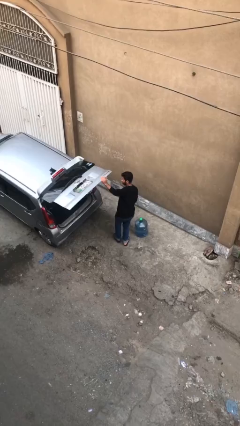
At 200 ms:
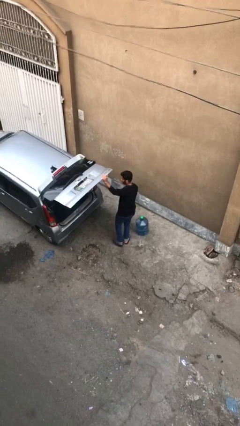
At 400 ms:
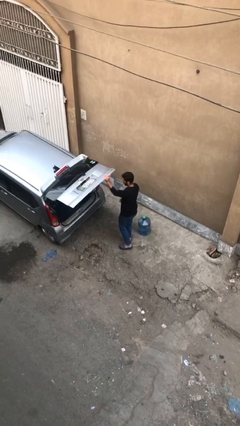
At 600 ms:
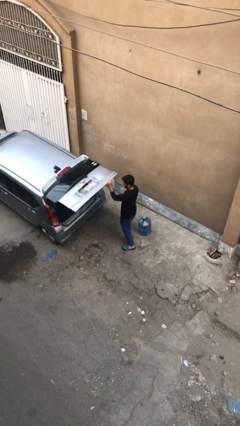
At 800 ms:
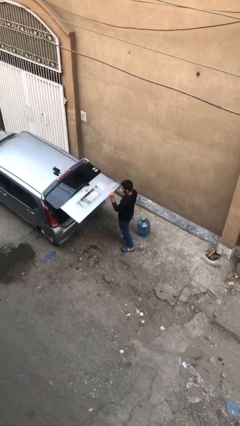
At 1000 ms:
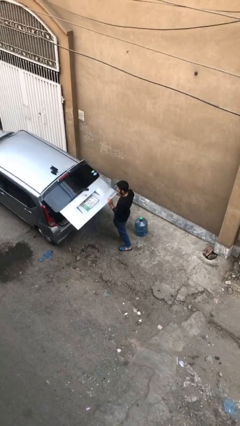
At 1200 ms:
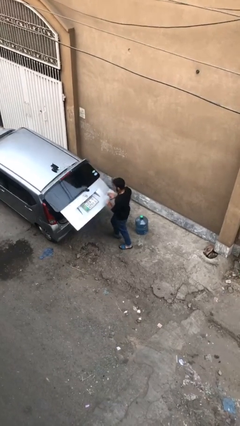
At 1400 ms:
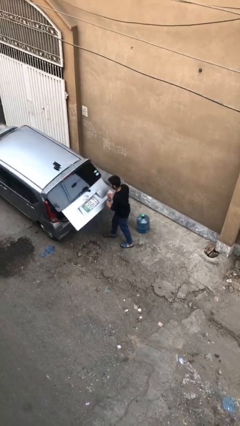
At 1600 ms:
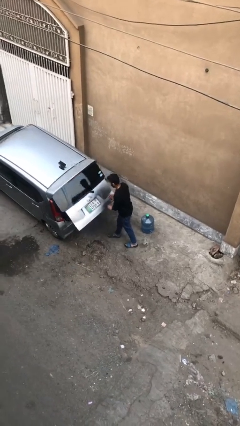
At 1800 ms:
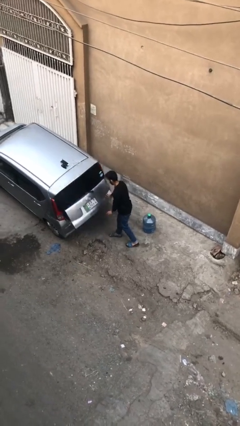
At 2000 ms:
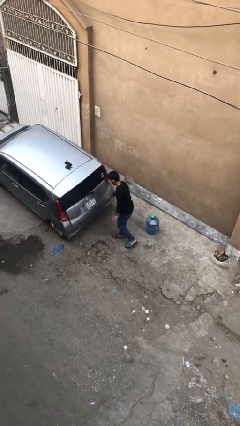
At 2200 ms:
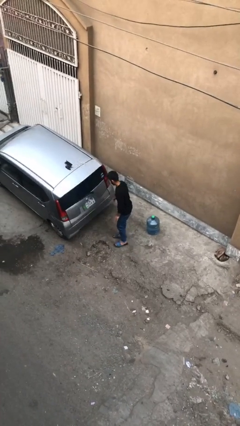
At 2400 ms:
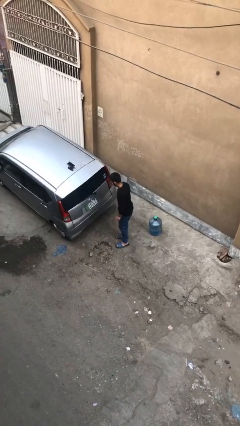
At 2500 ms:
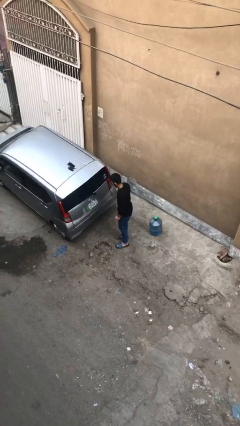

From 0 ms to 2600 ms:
person closes car trunk

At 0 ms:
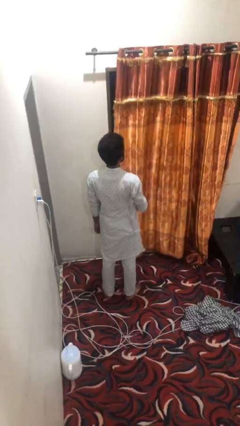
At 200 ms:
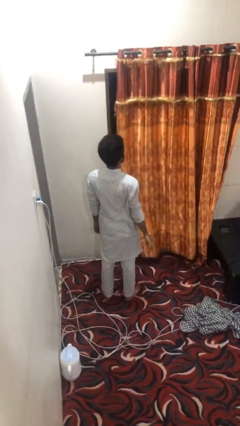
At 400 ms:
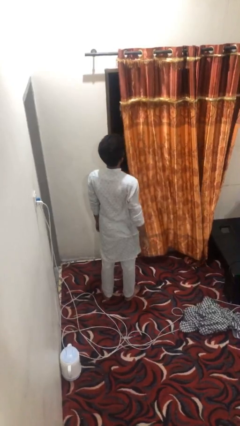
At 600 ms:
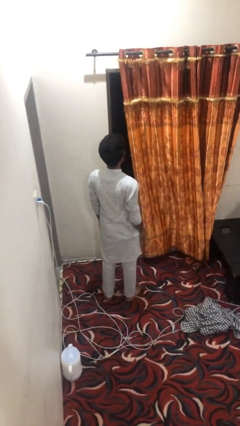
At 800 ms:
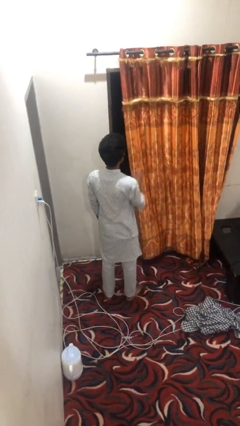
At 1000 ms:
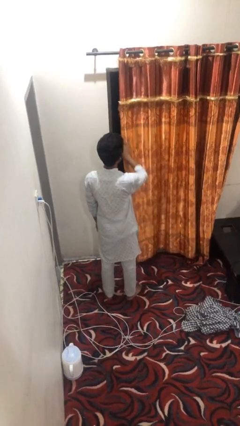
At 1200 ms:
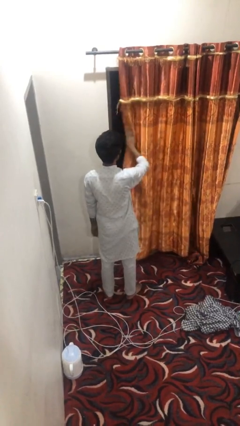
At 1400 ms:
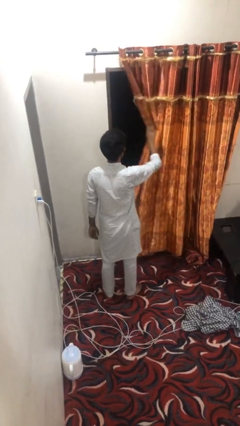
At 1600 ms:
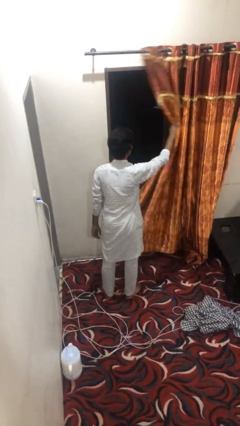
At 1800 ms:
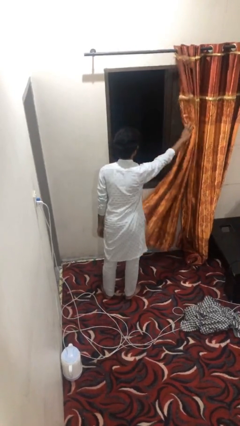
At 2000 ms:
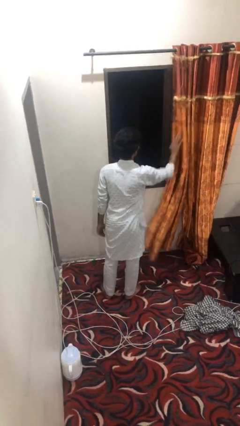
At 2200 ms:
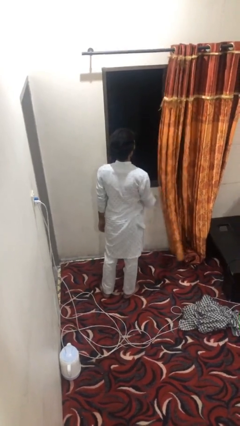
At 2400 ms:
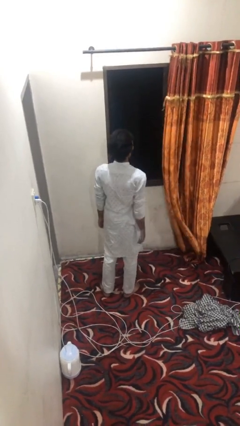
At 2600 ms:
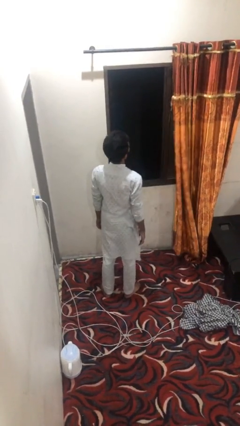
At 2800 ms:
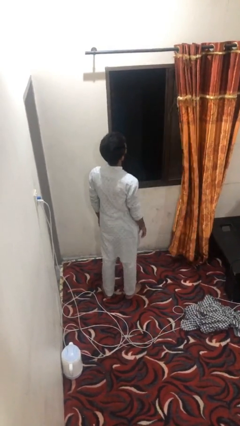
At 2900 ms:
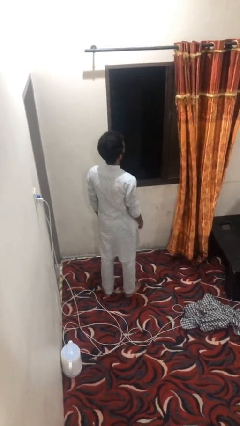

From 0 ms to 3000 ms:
person opens curtains

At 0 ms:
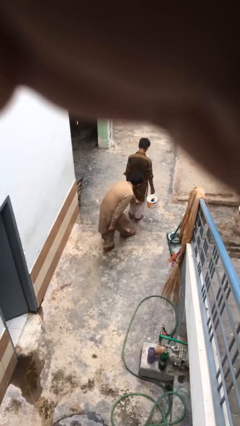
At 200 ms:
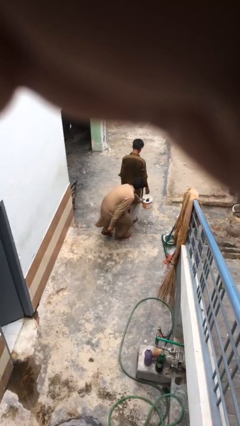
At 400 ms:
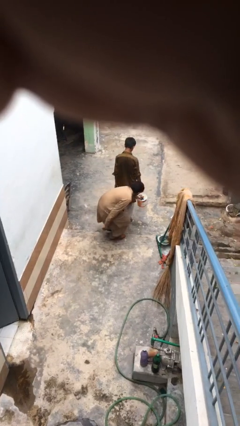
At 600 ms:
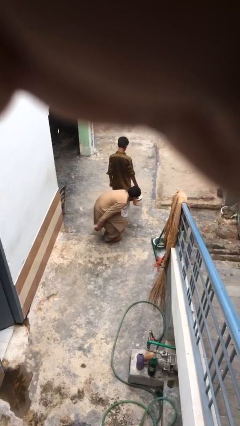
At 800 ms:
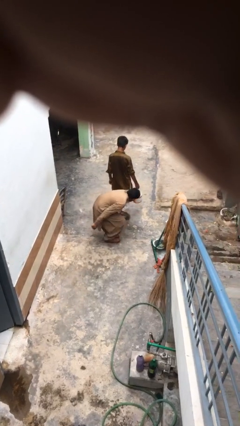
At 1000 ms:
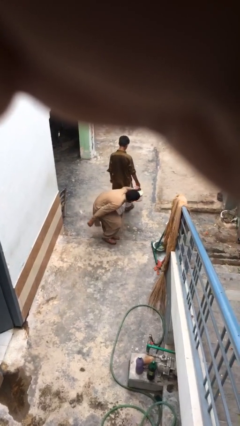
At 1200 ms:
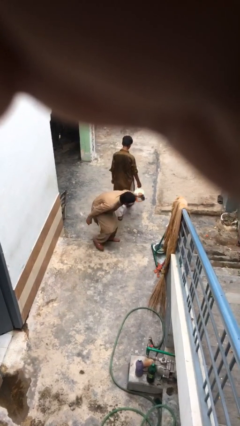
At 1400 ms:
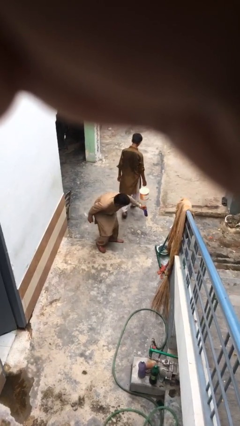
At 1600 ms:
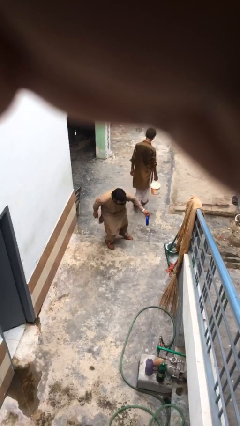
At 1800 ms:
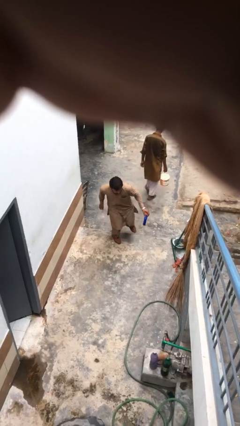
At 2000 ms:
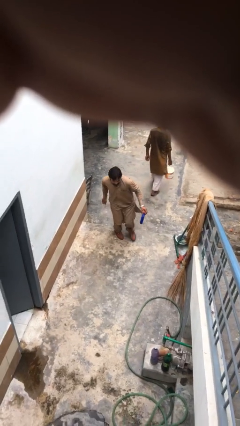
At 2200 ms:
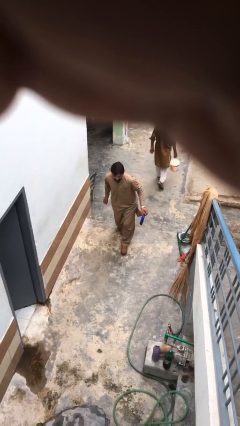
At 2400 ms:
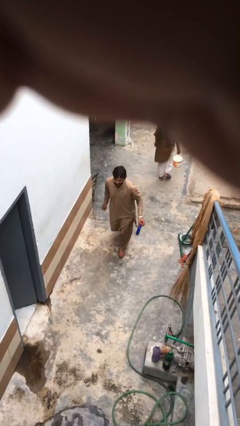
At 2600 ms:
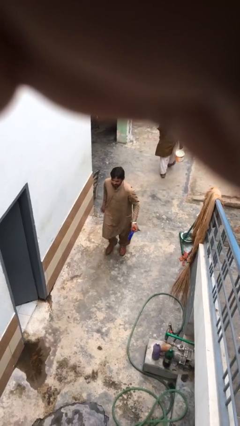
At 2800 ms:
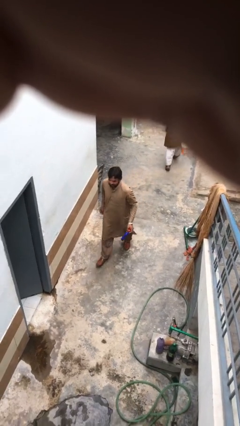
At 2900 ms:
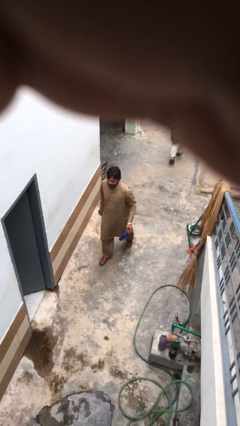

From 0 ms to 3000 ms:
person steals object from person

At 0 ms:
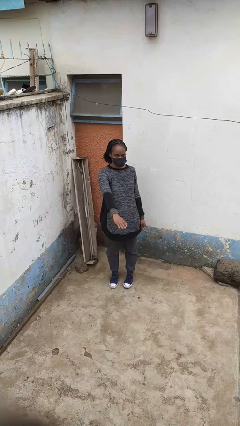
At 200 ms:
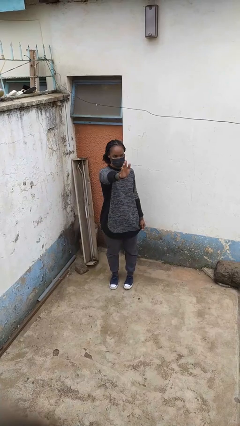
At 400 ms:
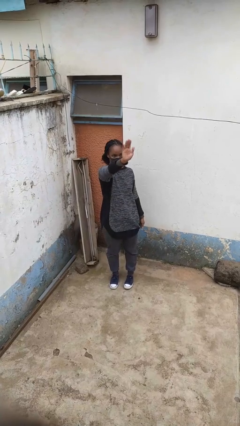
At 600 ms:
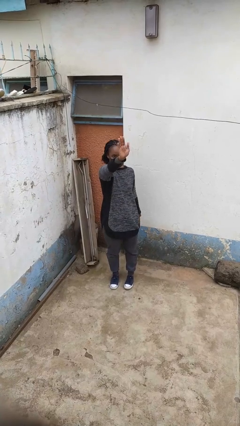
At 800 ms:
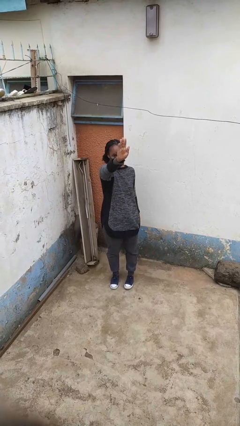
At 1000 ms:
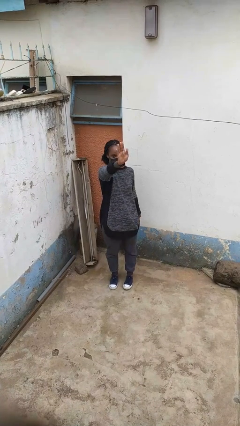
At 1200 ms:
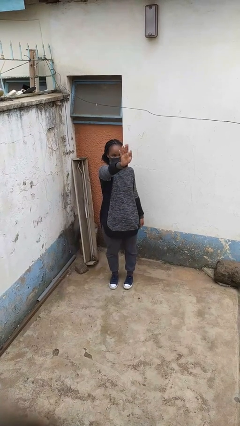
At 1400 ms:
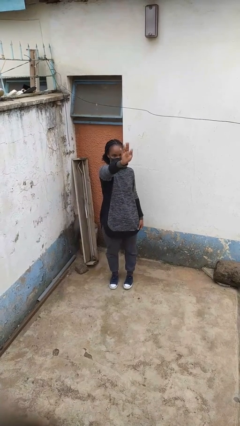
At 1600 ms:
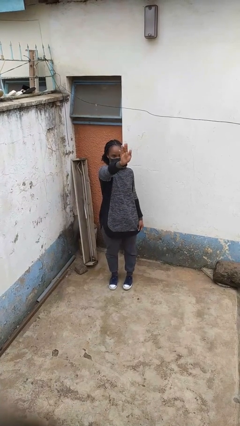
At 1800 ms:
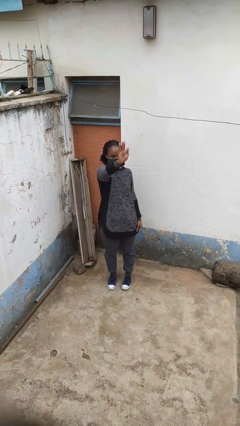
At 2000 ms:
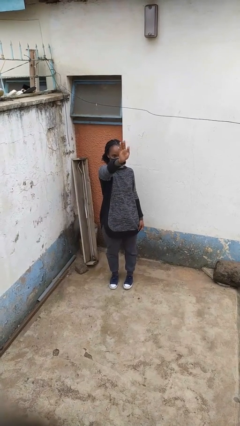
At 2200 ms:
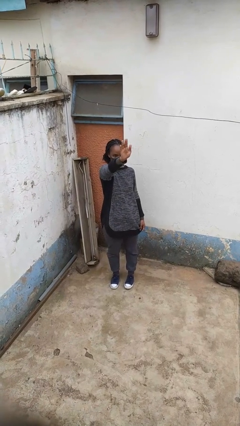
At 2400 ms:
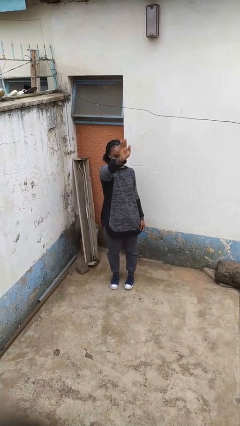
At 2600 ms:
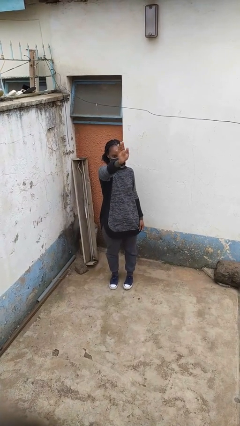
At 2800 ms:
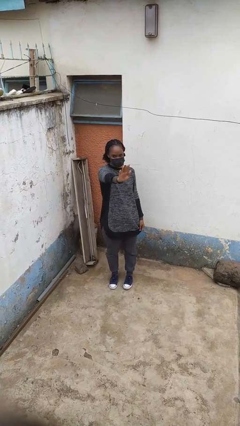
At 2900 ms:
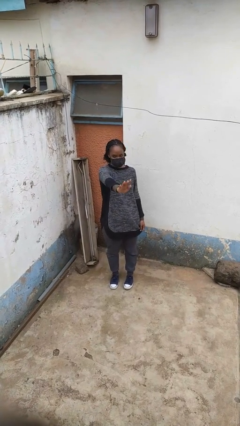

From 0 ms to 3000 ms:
person waves at person

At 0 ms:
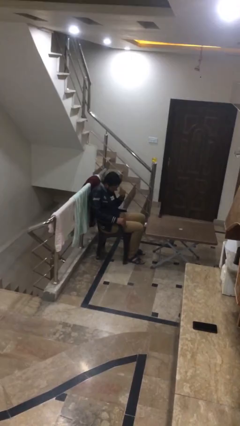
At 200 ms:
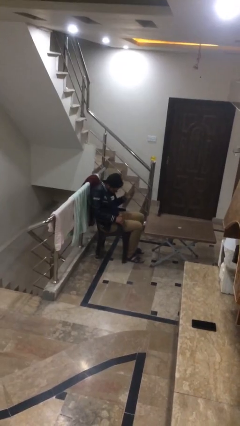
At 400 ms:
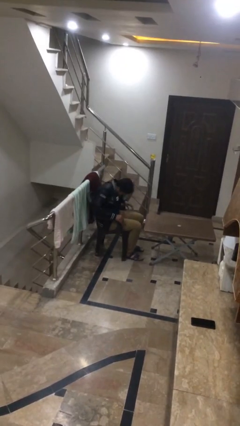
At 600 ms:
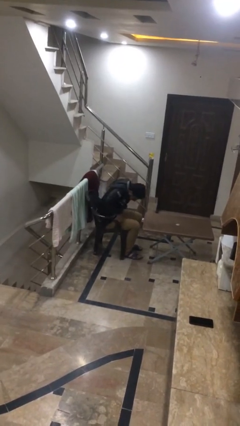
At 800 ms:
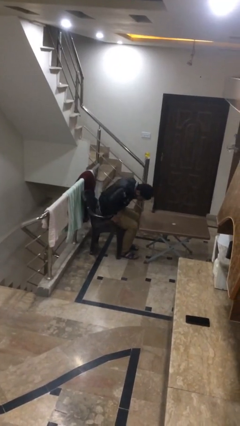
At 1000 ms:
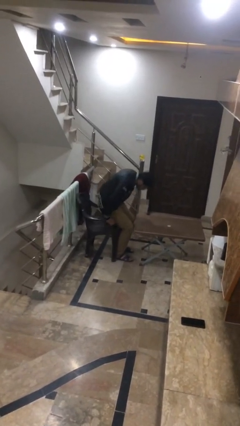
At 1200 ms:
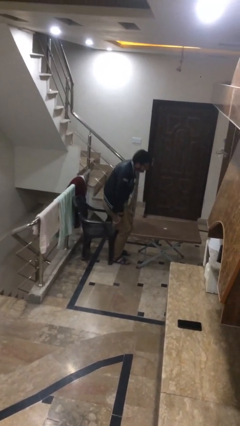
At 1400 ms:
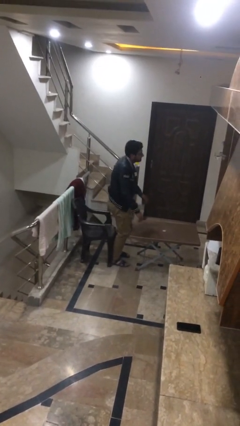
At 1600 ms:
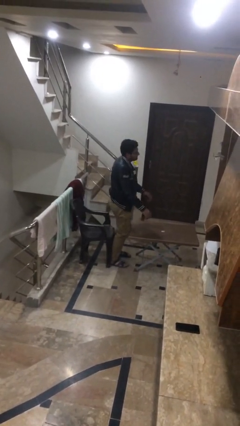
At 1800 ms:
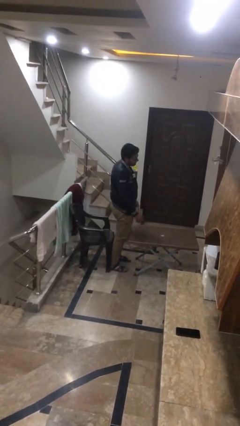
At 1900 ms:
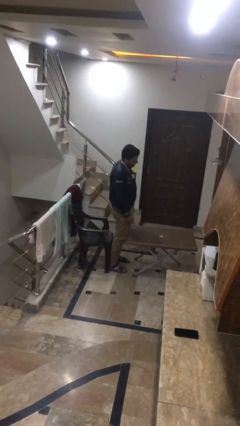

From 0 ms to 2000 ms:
person stands up

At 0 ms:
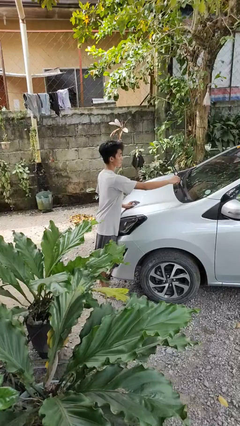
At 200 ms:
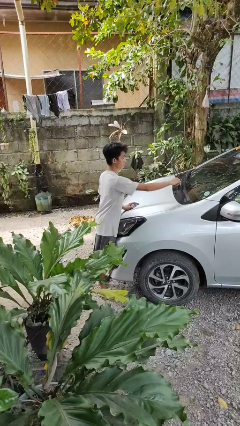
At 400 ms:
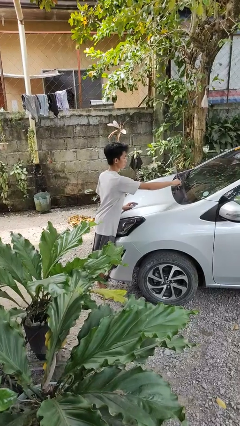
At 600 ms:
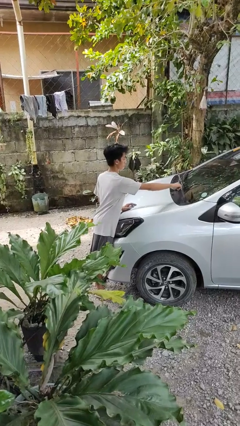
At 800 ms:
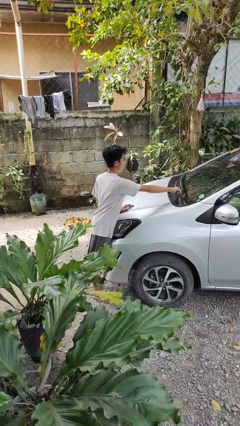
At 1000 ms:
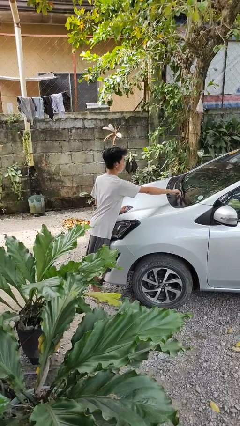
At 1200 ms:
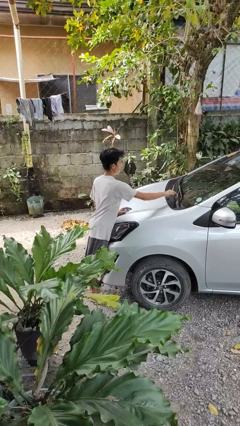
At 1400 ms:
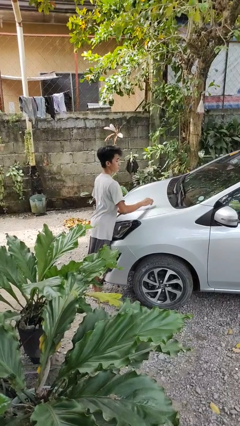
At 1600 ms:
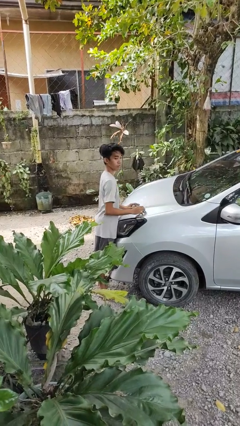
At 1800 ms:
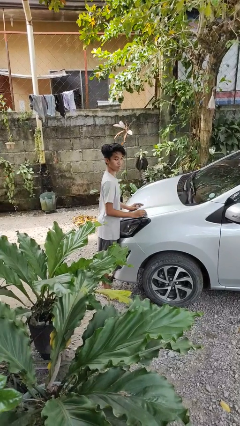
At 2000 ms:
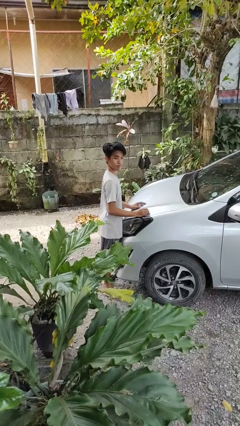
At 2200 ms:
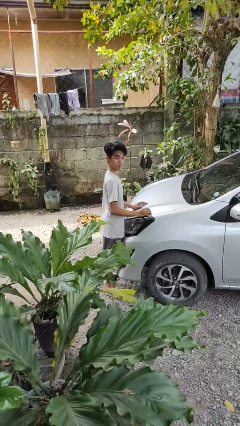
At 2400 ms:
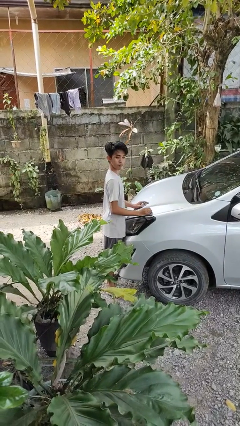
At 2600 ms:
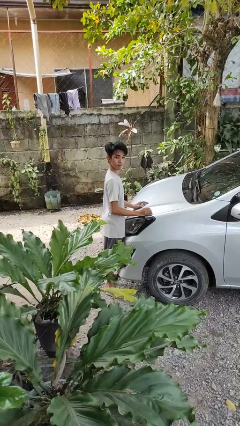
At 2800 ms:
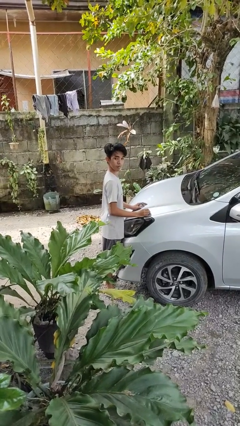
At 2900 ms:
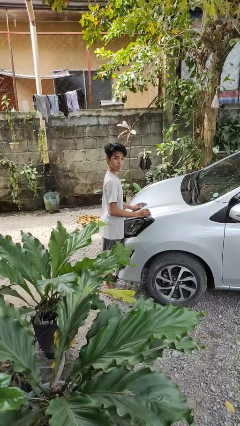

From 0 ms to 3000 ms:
person flips down car wipers

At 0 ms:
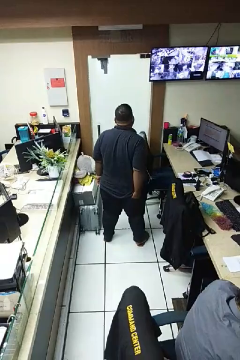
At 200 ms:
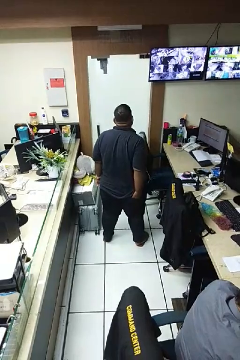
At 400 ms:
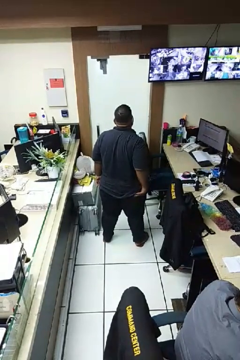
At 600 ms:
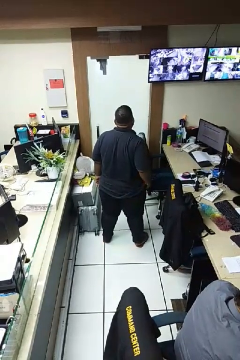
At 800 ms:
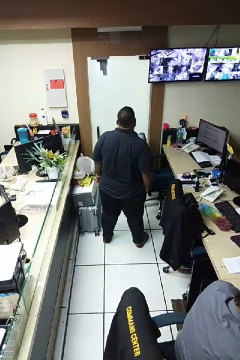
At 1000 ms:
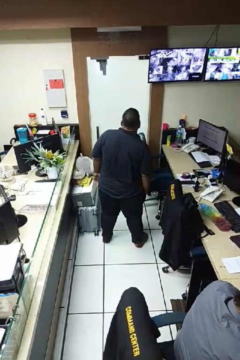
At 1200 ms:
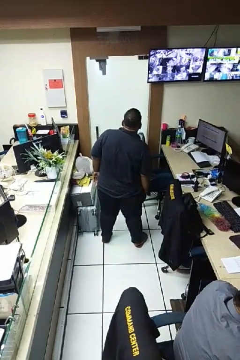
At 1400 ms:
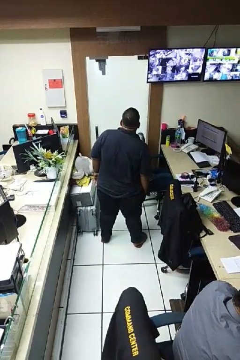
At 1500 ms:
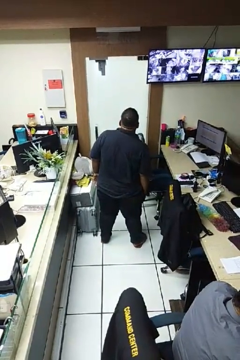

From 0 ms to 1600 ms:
person puts hands in back pockets
